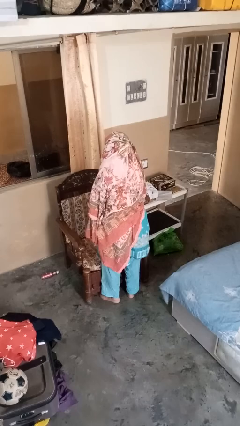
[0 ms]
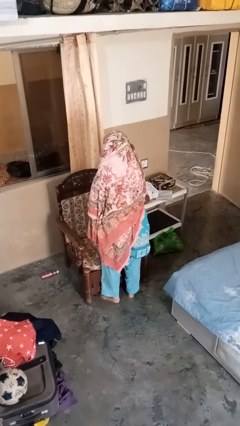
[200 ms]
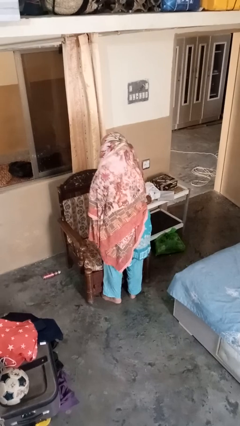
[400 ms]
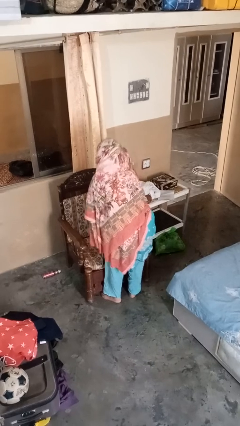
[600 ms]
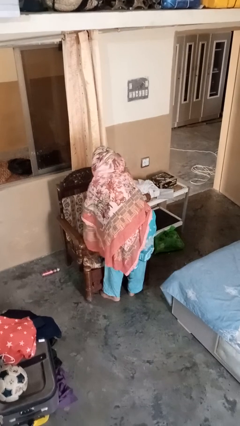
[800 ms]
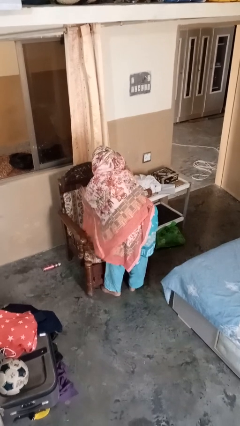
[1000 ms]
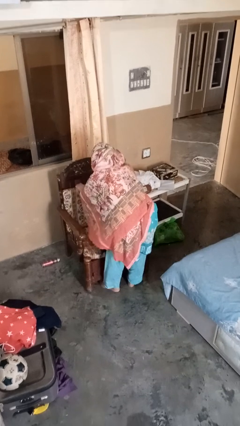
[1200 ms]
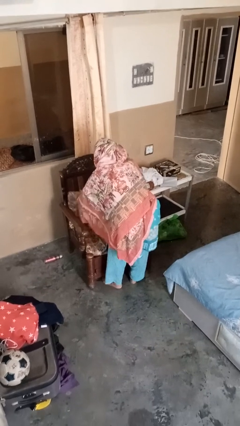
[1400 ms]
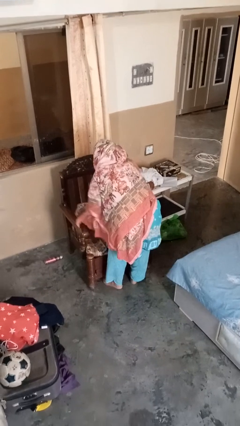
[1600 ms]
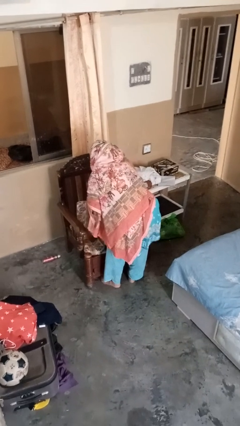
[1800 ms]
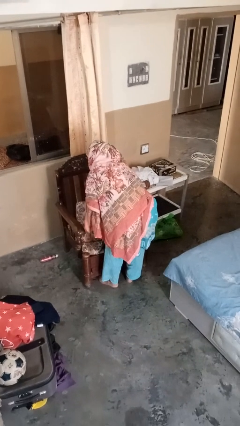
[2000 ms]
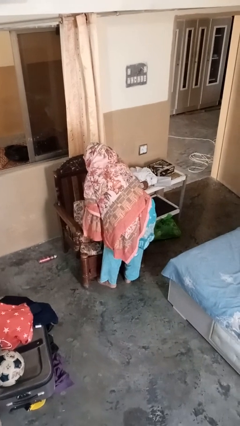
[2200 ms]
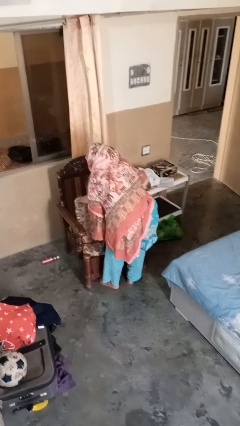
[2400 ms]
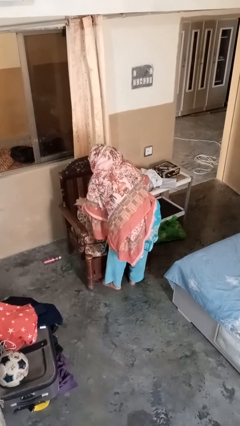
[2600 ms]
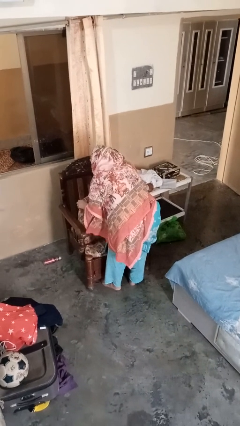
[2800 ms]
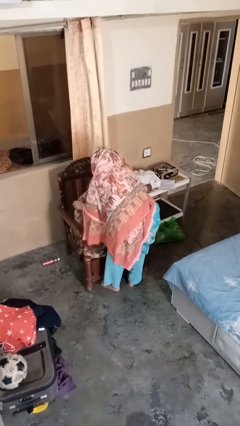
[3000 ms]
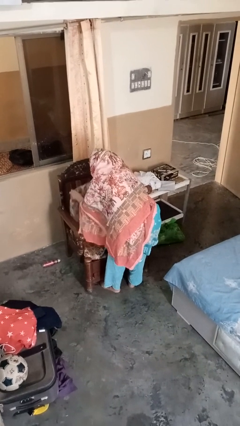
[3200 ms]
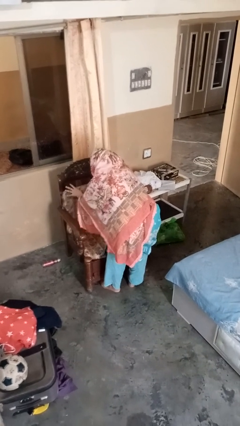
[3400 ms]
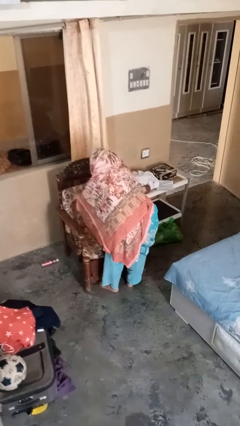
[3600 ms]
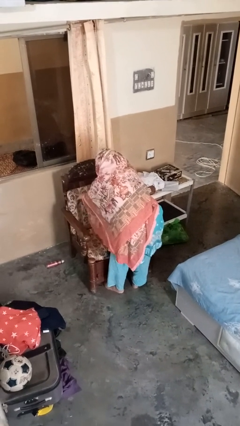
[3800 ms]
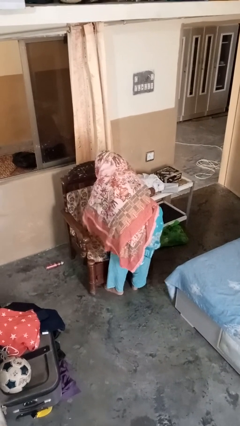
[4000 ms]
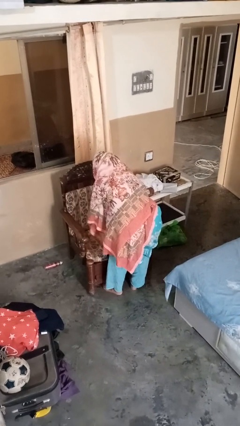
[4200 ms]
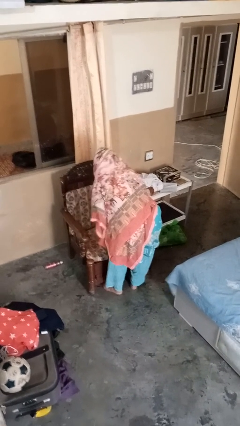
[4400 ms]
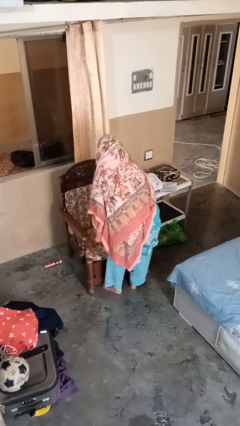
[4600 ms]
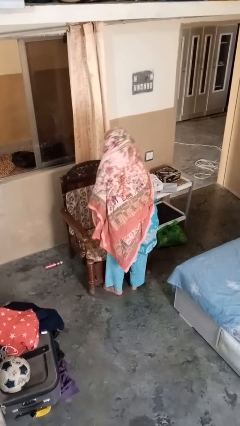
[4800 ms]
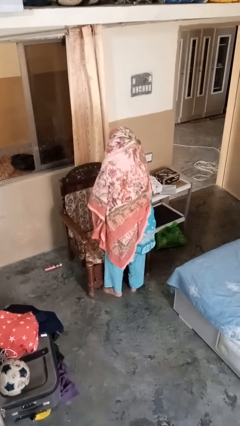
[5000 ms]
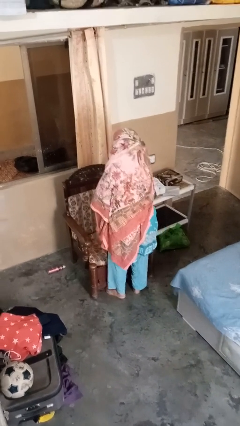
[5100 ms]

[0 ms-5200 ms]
person searches in couch

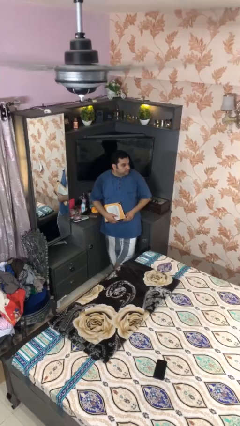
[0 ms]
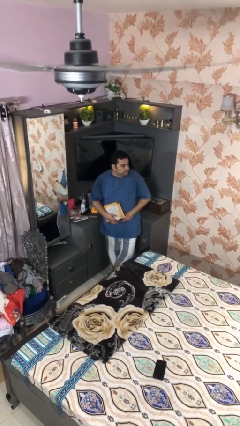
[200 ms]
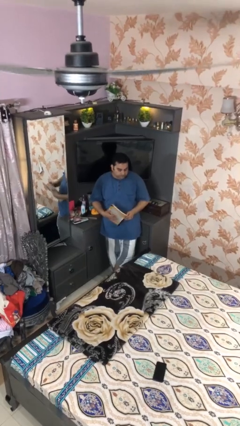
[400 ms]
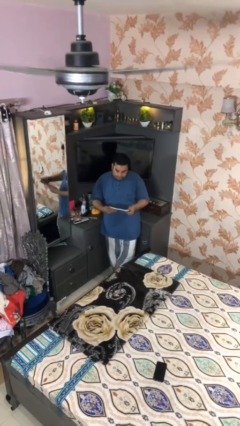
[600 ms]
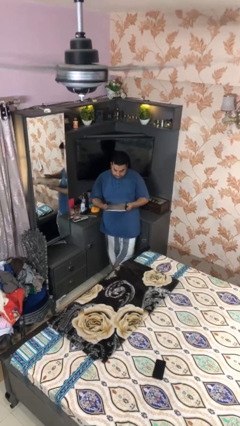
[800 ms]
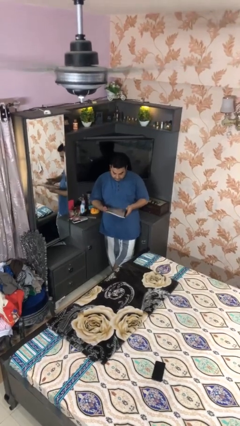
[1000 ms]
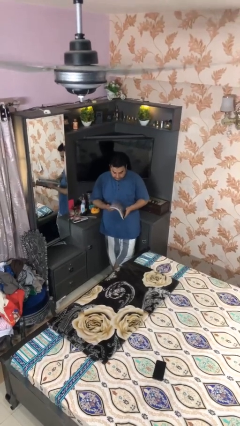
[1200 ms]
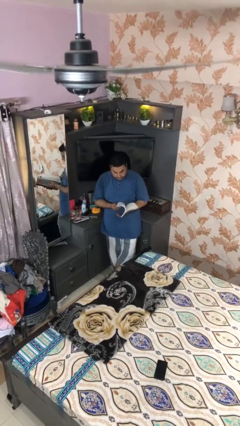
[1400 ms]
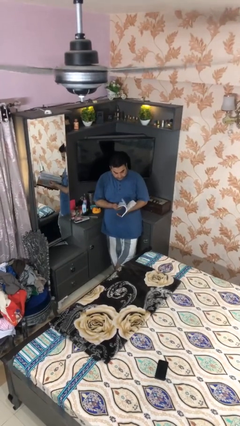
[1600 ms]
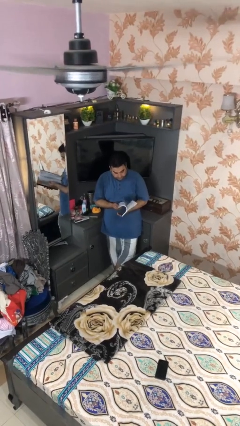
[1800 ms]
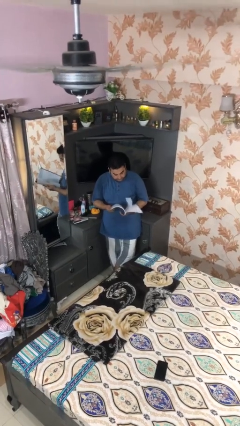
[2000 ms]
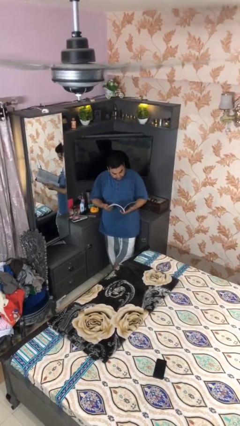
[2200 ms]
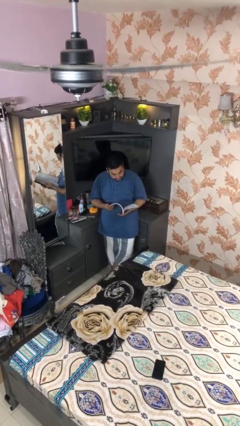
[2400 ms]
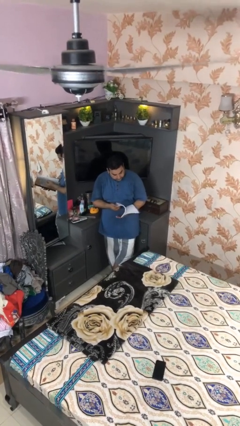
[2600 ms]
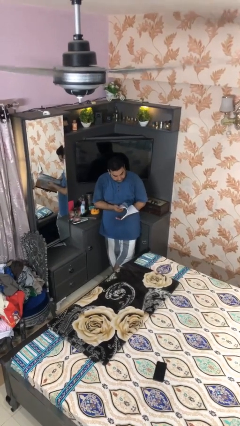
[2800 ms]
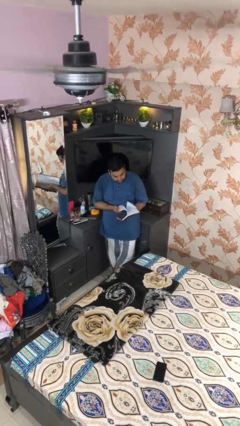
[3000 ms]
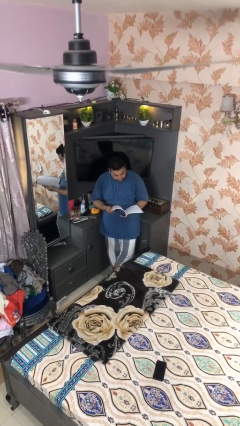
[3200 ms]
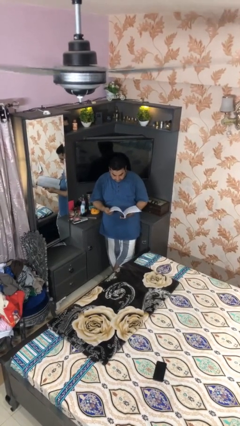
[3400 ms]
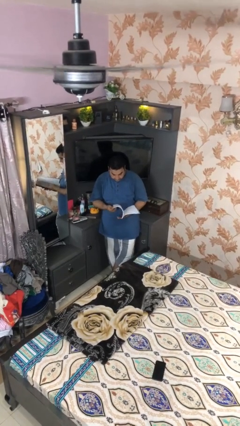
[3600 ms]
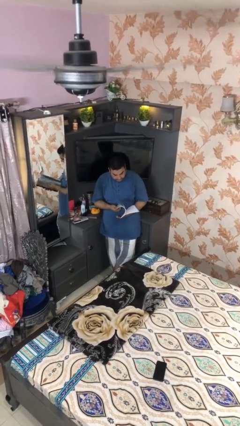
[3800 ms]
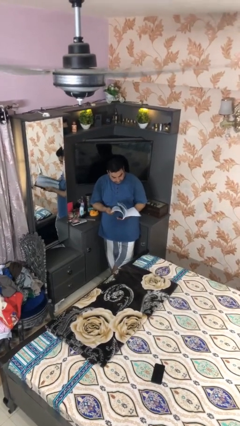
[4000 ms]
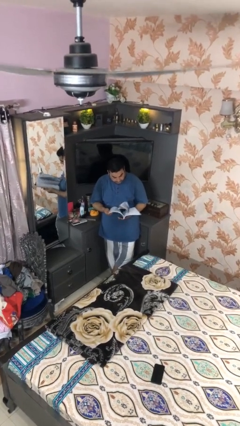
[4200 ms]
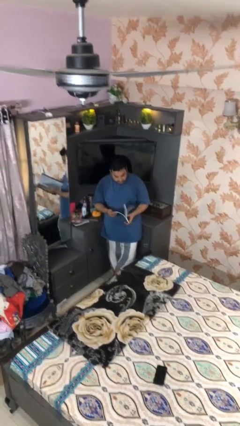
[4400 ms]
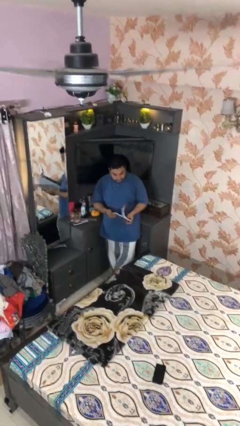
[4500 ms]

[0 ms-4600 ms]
person reads book

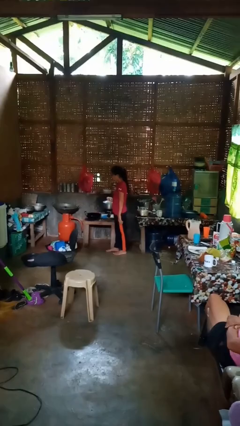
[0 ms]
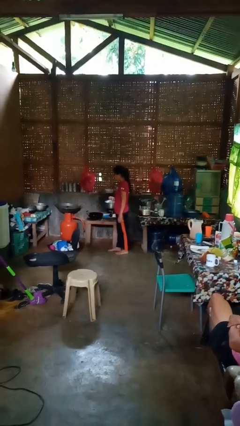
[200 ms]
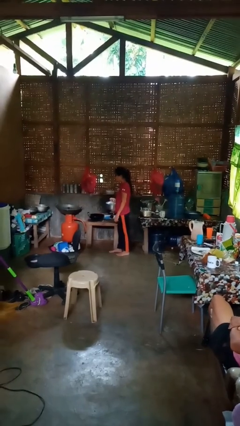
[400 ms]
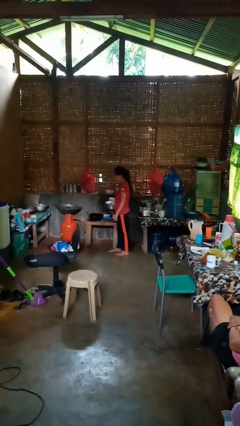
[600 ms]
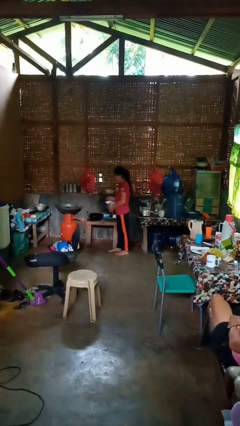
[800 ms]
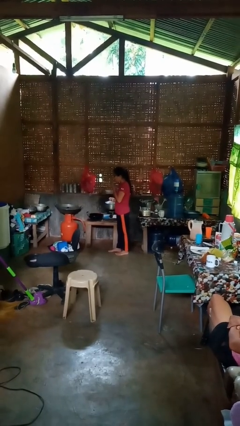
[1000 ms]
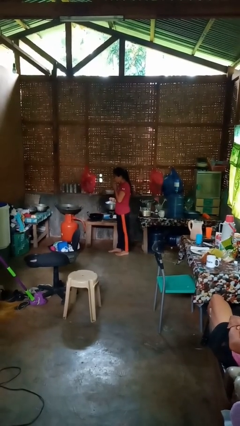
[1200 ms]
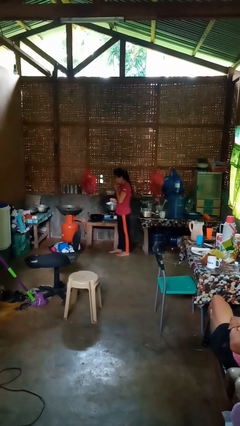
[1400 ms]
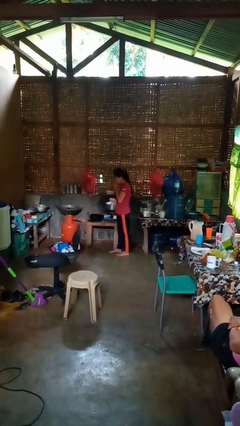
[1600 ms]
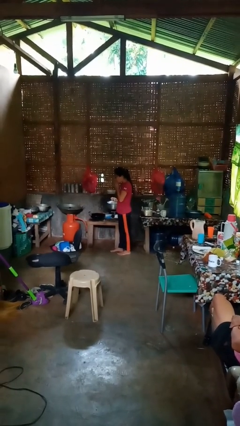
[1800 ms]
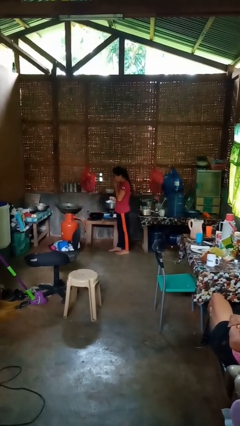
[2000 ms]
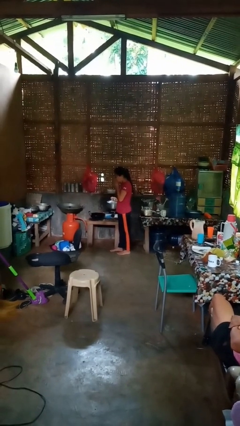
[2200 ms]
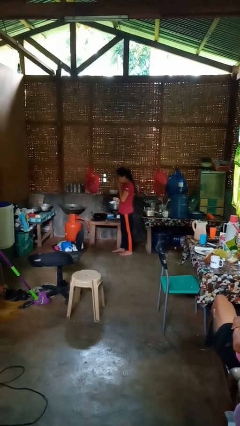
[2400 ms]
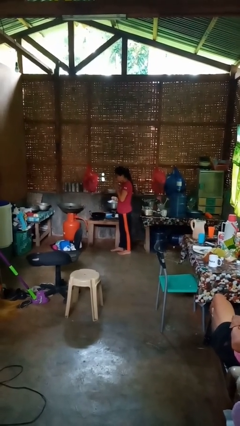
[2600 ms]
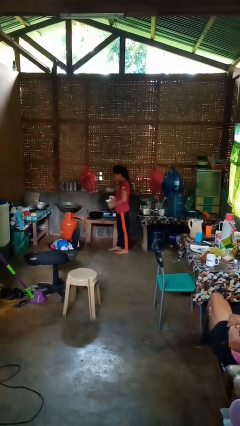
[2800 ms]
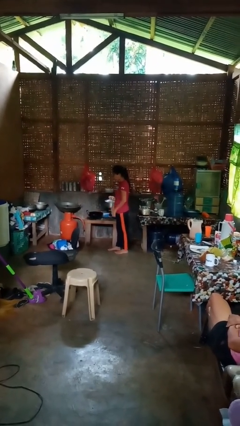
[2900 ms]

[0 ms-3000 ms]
person burns hand

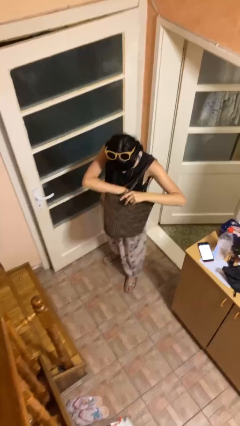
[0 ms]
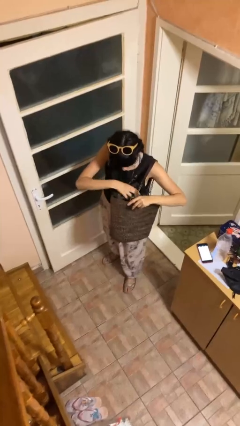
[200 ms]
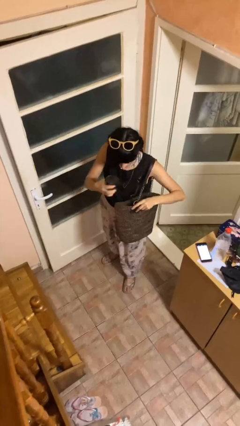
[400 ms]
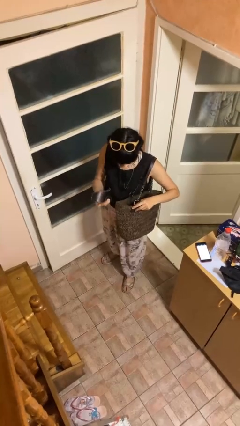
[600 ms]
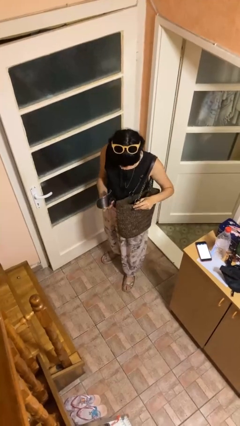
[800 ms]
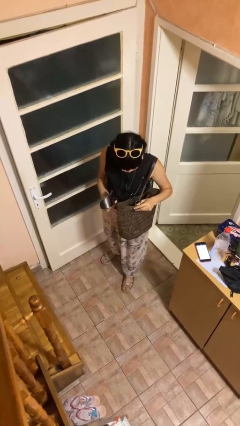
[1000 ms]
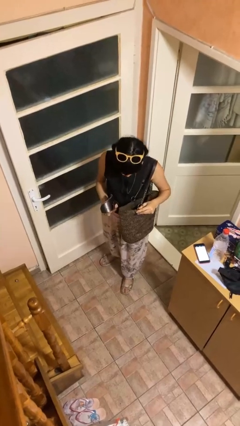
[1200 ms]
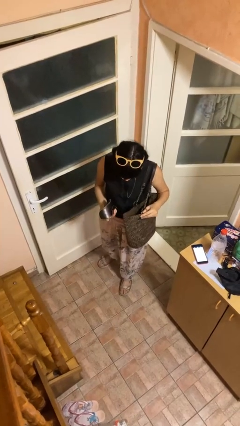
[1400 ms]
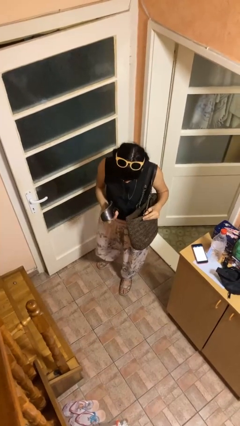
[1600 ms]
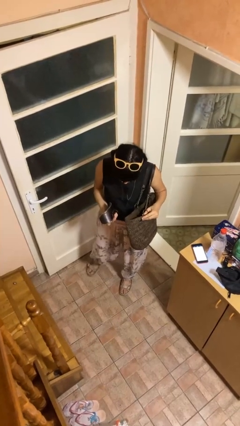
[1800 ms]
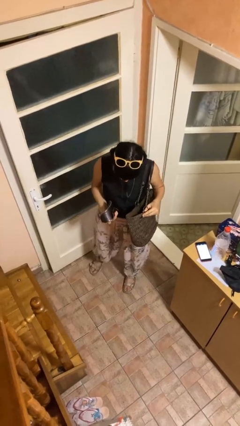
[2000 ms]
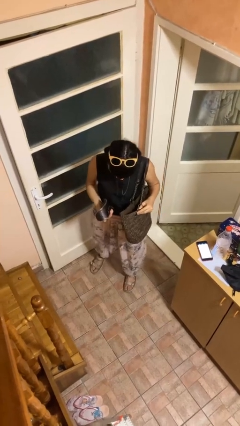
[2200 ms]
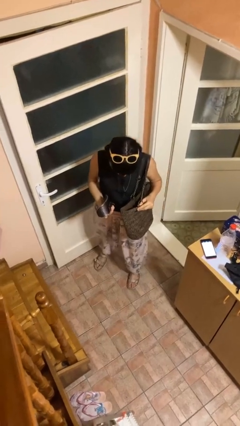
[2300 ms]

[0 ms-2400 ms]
person takes object from purse

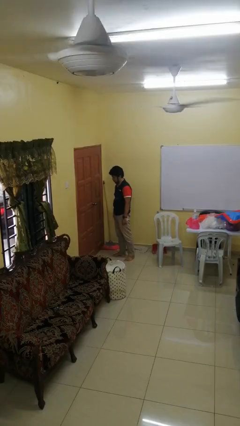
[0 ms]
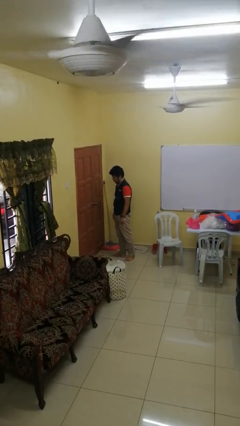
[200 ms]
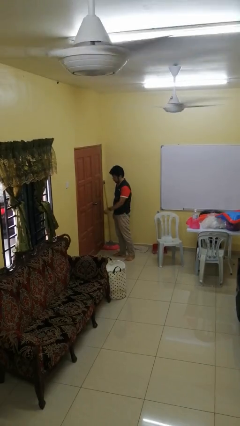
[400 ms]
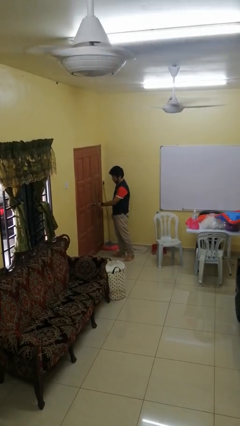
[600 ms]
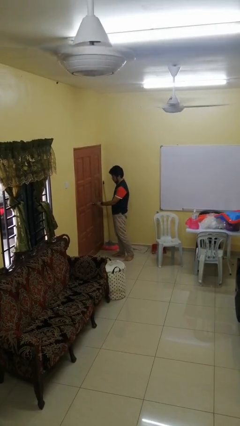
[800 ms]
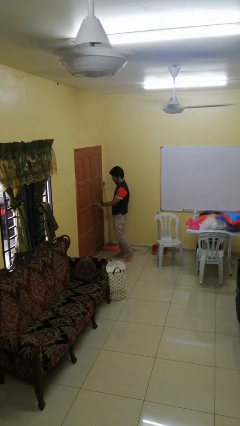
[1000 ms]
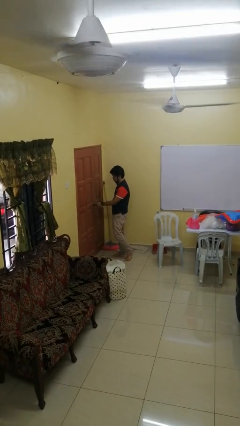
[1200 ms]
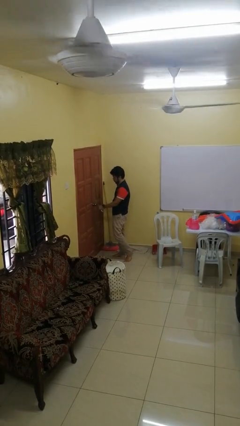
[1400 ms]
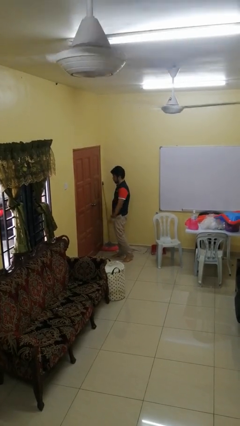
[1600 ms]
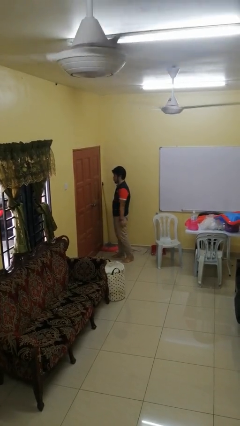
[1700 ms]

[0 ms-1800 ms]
person locks door with keys

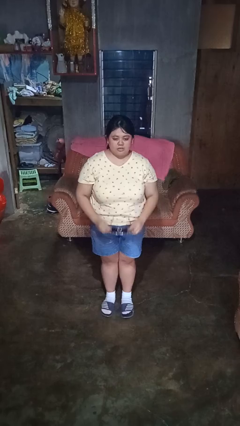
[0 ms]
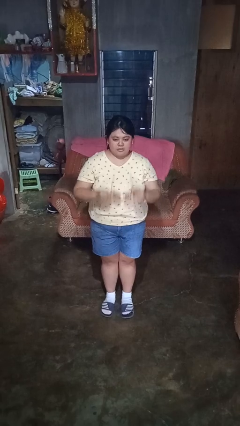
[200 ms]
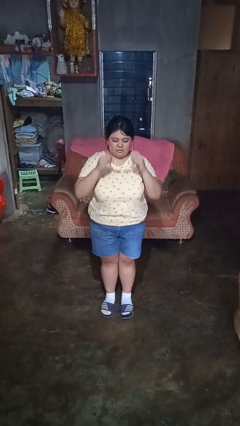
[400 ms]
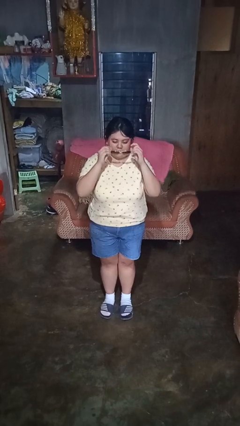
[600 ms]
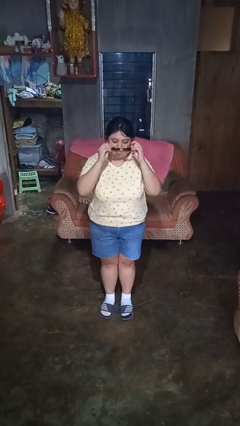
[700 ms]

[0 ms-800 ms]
person puts on sunglasses
